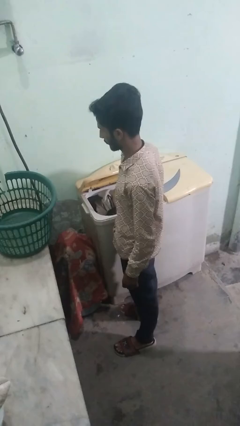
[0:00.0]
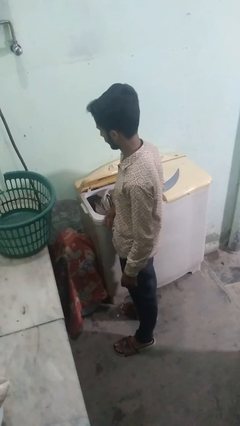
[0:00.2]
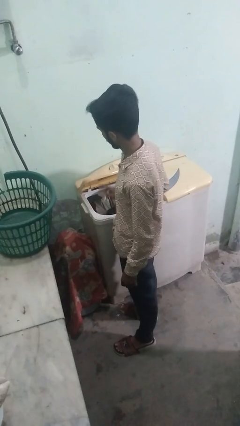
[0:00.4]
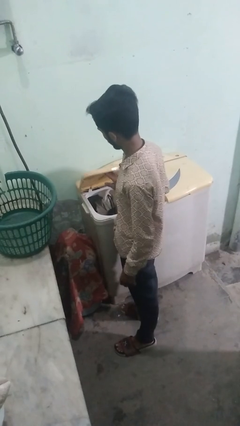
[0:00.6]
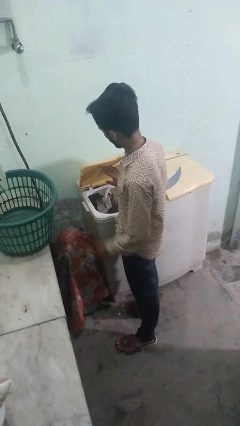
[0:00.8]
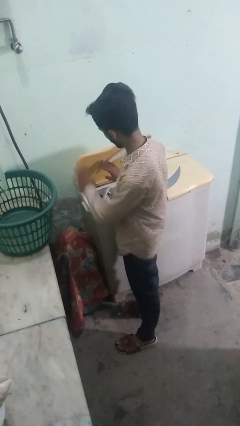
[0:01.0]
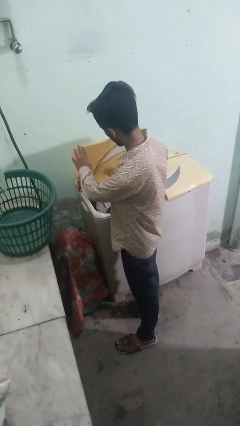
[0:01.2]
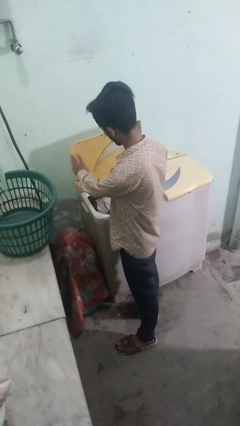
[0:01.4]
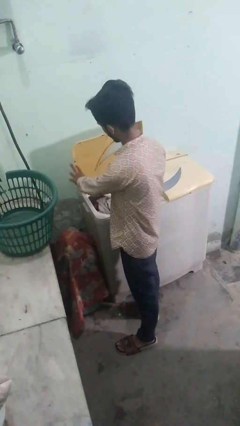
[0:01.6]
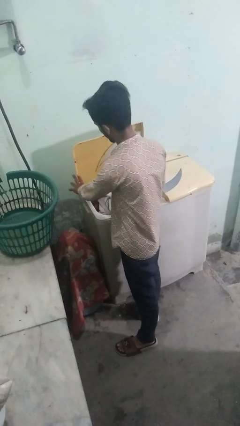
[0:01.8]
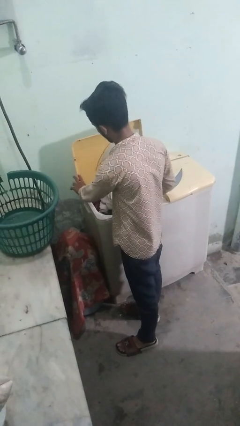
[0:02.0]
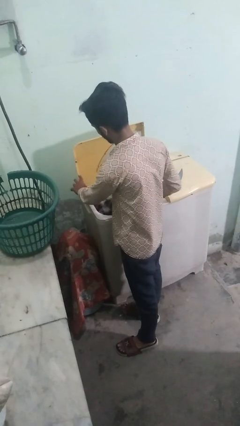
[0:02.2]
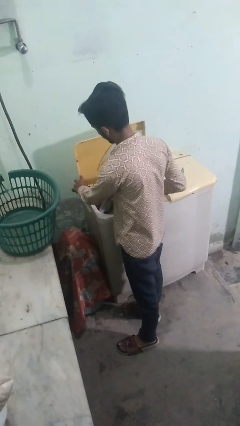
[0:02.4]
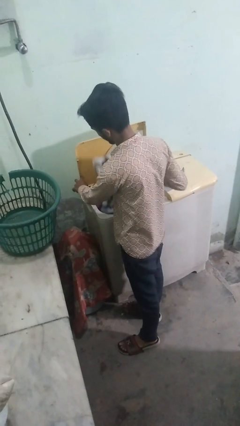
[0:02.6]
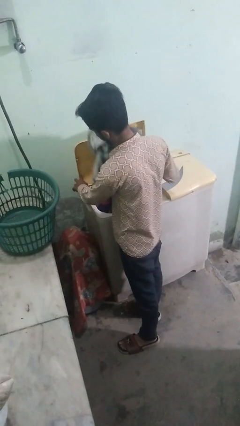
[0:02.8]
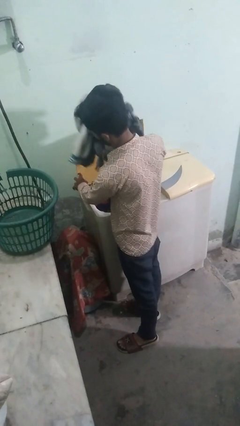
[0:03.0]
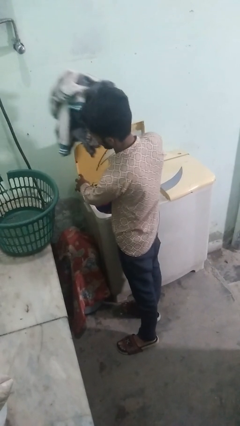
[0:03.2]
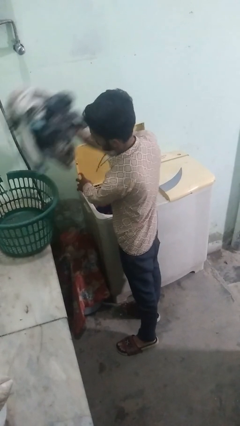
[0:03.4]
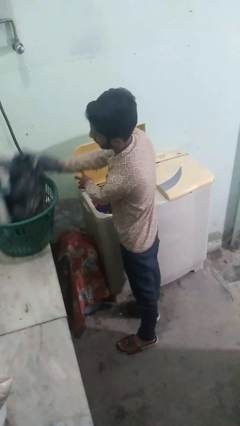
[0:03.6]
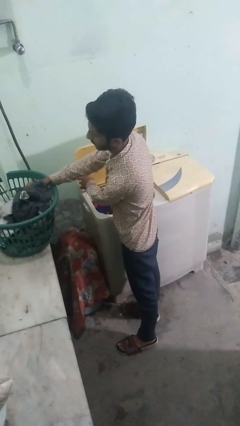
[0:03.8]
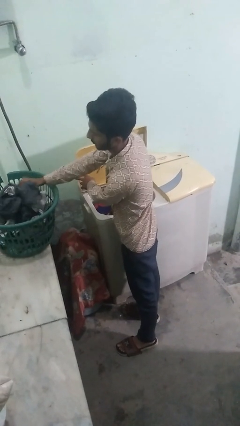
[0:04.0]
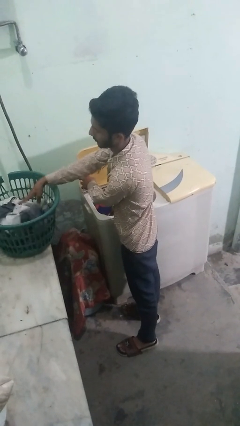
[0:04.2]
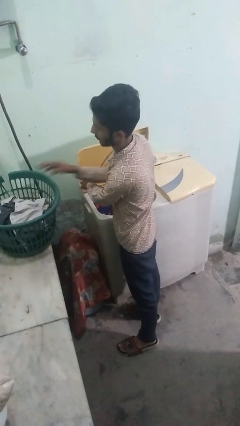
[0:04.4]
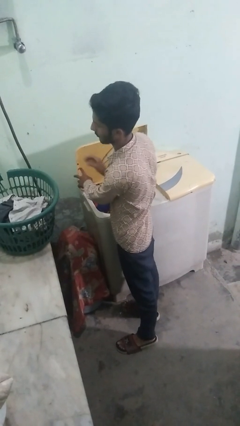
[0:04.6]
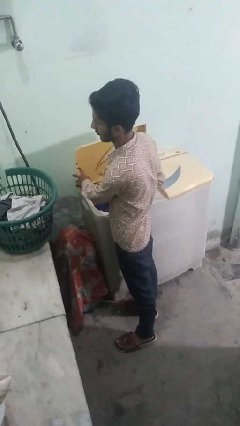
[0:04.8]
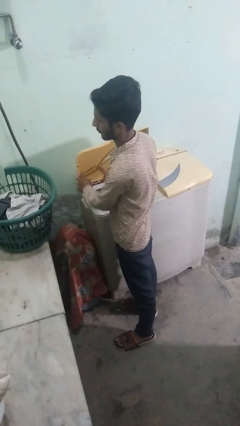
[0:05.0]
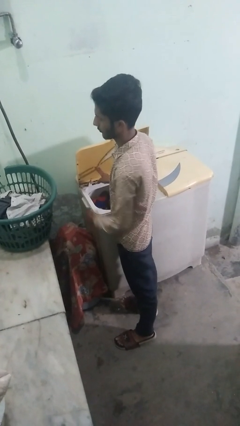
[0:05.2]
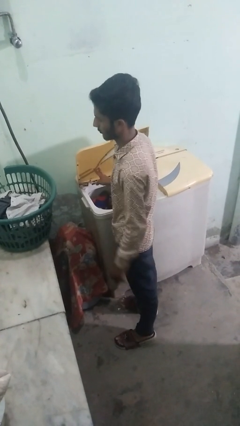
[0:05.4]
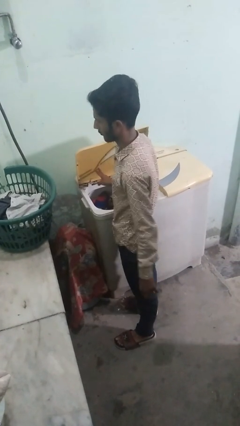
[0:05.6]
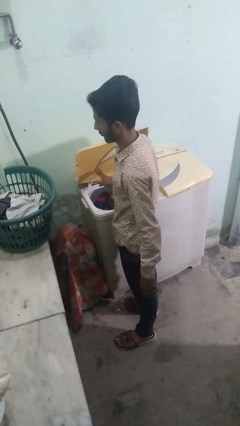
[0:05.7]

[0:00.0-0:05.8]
person unloads clotheswasher

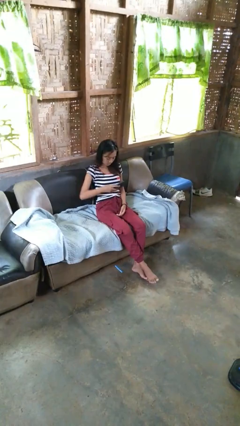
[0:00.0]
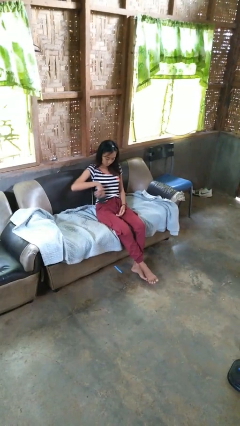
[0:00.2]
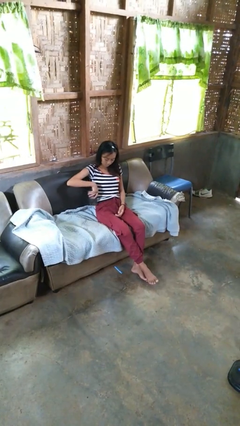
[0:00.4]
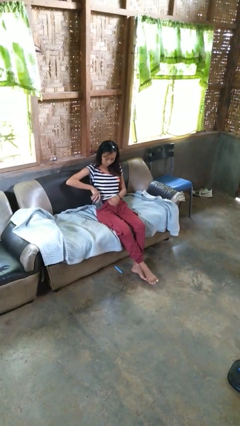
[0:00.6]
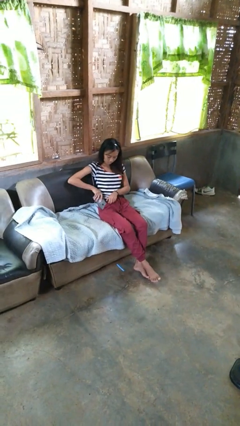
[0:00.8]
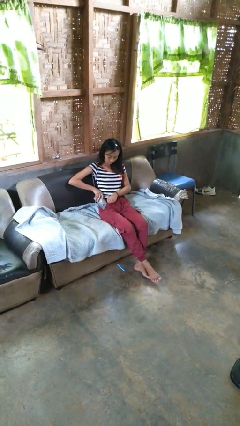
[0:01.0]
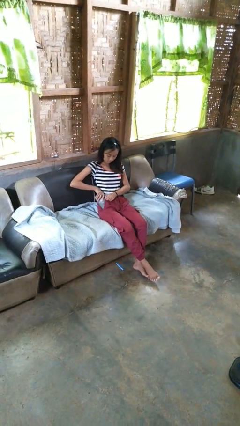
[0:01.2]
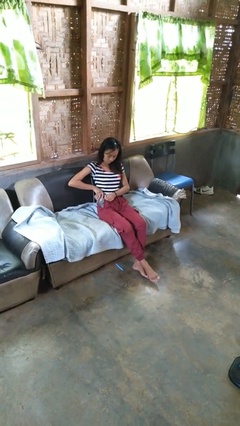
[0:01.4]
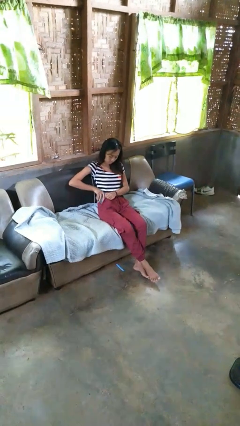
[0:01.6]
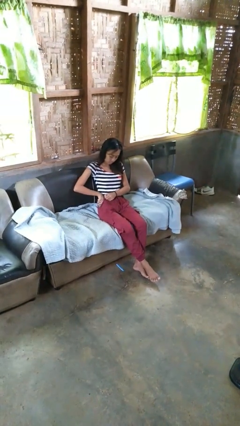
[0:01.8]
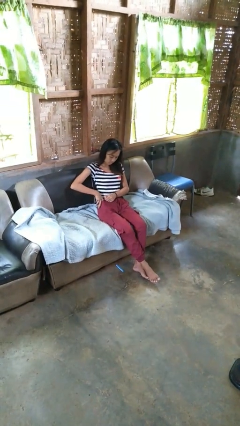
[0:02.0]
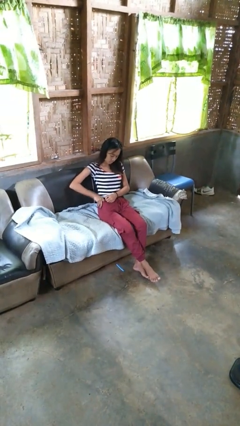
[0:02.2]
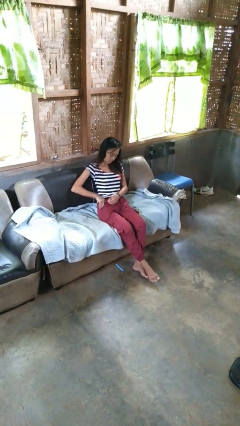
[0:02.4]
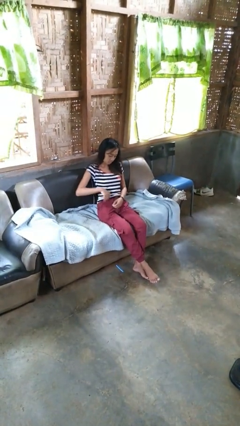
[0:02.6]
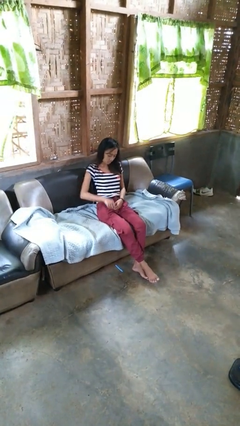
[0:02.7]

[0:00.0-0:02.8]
person puts phone into pocket

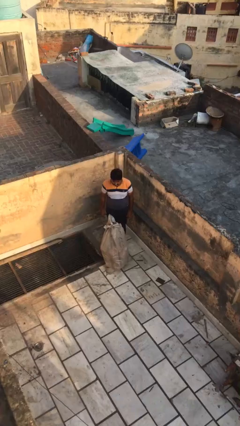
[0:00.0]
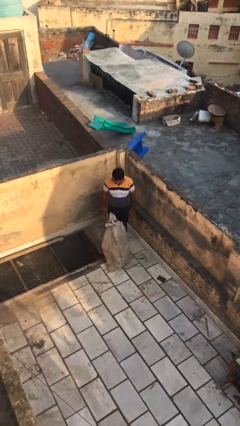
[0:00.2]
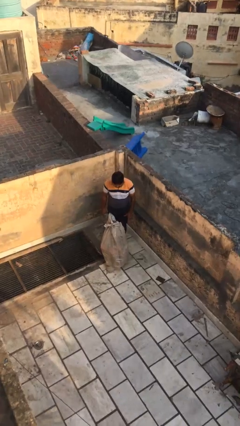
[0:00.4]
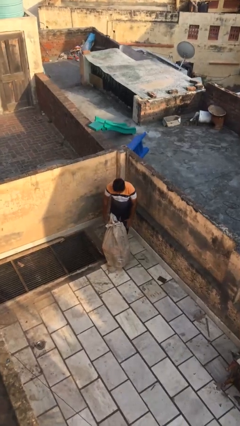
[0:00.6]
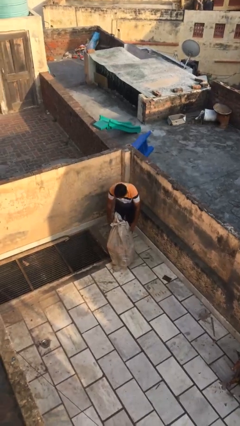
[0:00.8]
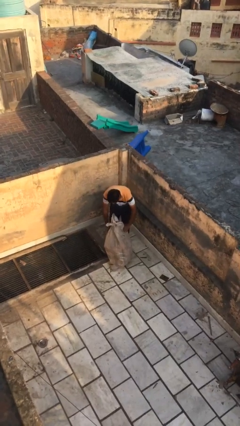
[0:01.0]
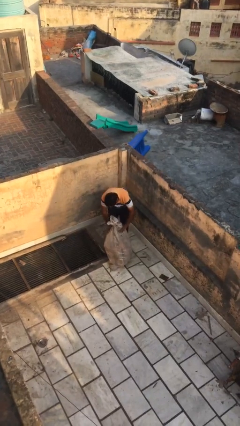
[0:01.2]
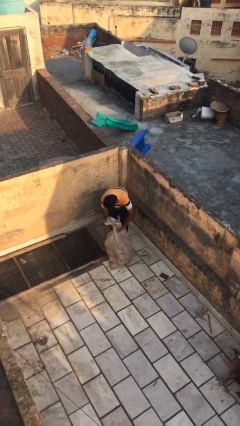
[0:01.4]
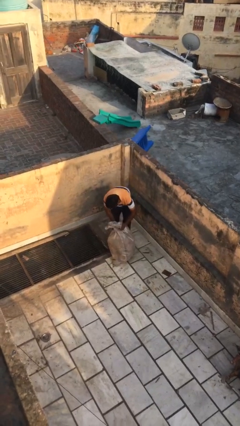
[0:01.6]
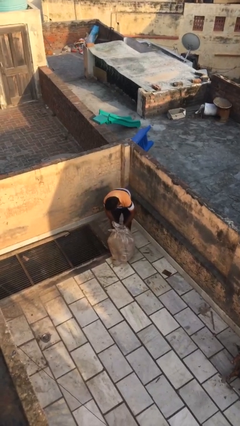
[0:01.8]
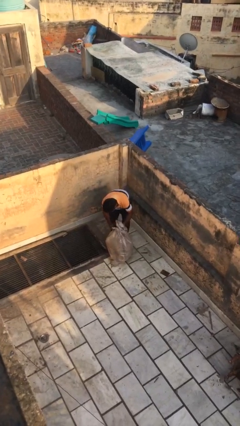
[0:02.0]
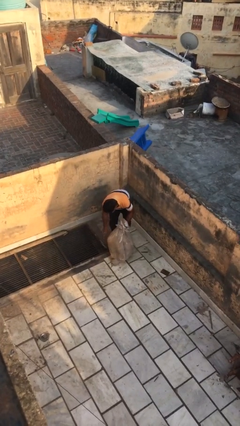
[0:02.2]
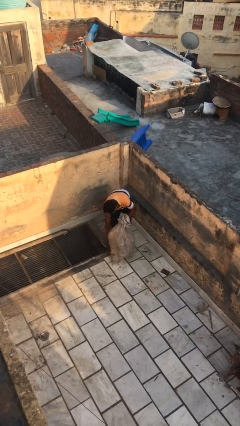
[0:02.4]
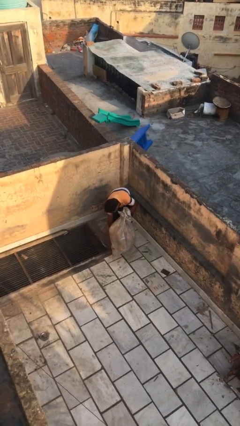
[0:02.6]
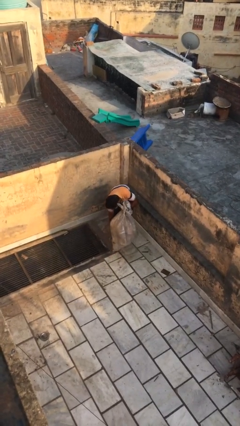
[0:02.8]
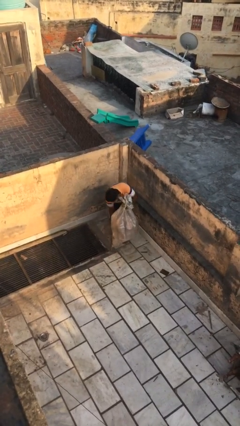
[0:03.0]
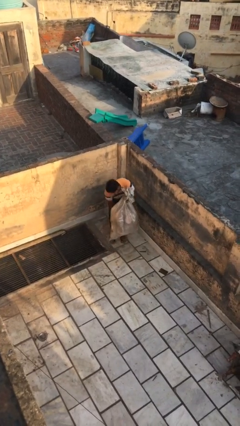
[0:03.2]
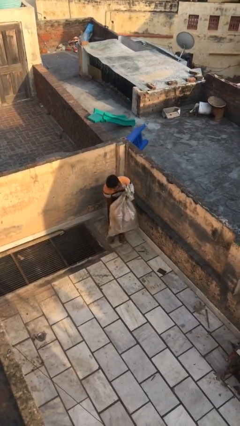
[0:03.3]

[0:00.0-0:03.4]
person picks up object from floor

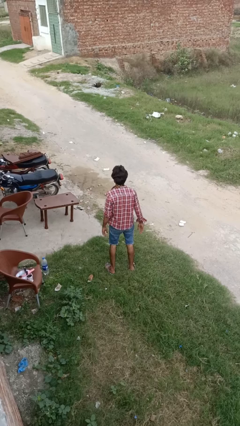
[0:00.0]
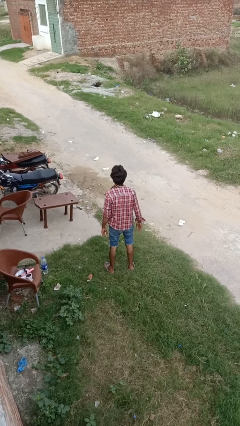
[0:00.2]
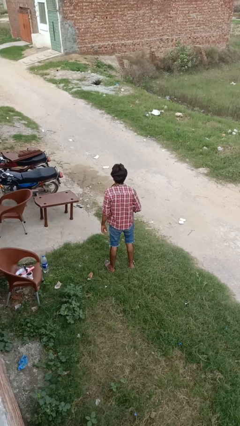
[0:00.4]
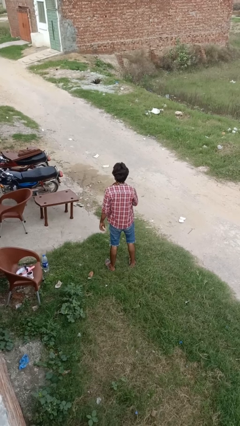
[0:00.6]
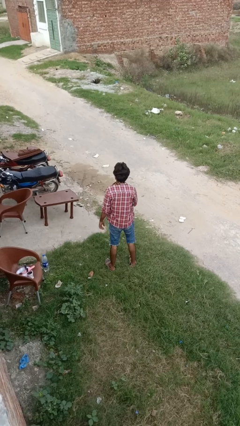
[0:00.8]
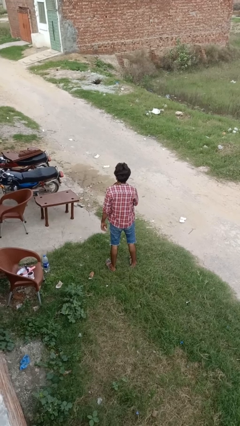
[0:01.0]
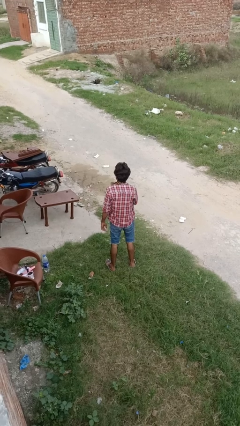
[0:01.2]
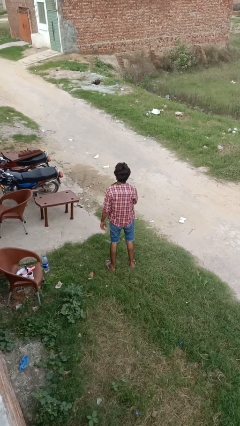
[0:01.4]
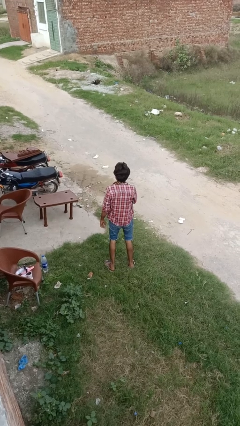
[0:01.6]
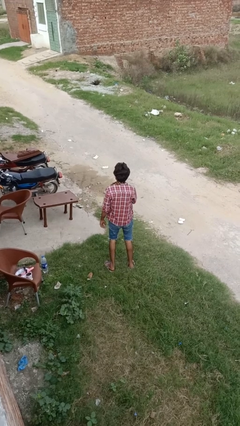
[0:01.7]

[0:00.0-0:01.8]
person drums on chest

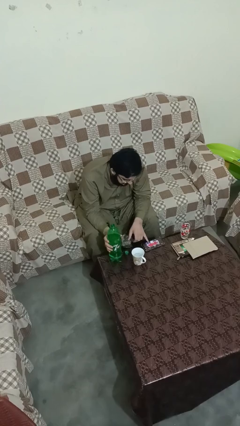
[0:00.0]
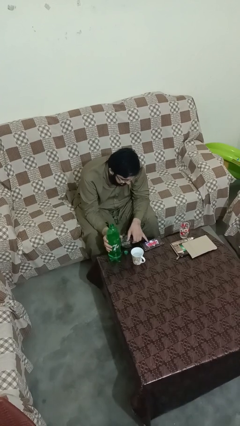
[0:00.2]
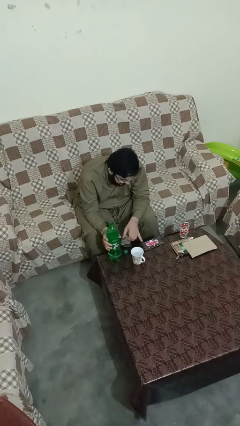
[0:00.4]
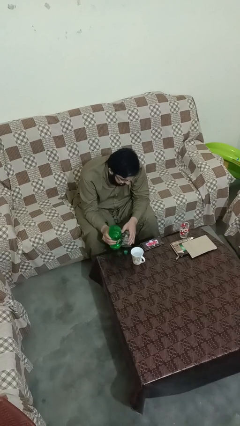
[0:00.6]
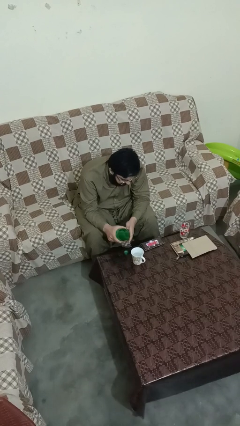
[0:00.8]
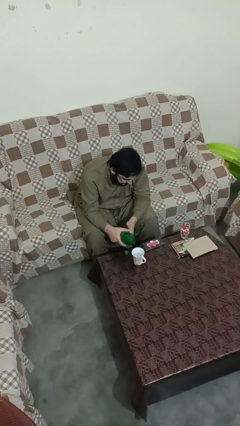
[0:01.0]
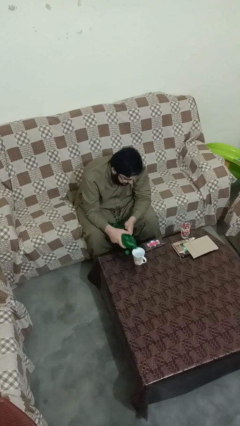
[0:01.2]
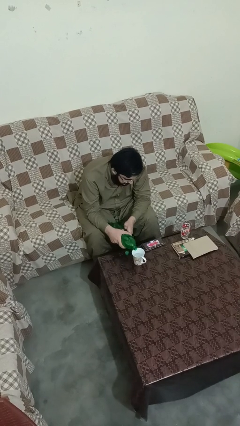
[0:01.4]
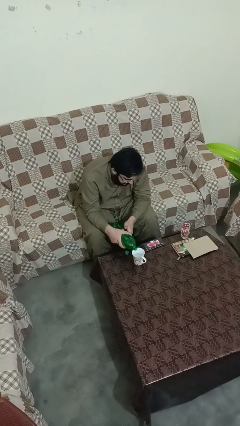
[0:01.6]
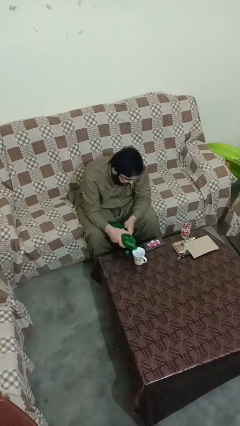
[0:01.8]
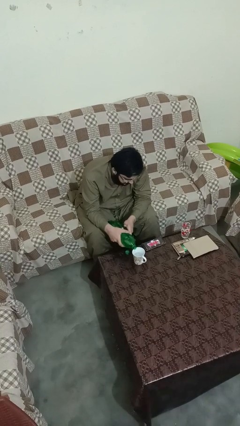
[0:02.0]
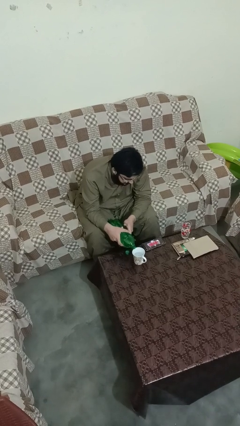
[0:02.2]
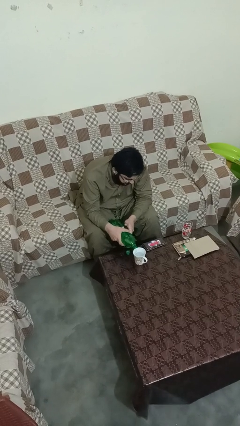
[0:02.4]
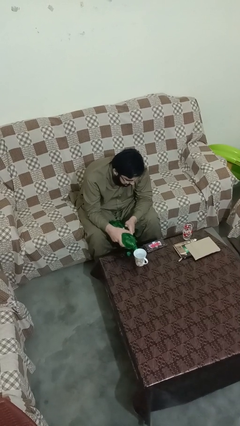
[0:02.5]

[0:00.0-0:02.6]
person pours liquid into cup

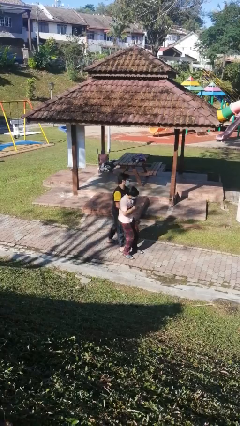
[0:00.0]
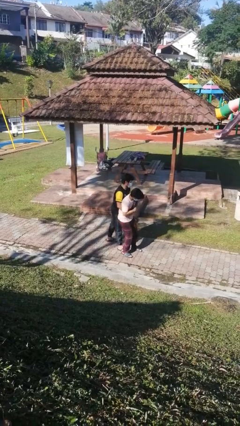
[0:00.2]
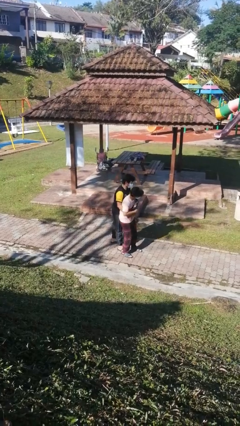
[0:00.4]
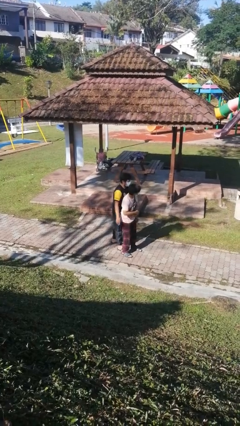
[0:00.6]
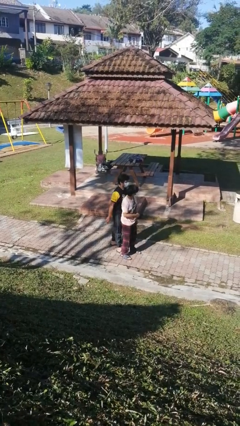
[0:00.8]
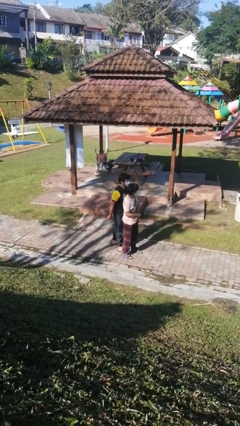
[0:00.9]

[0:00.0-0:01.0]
person puts down person

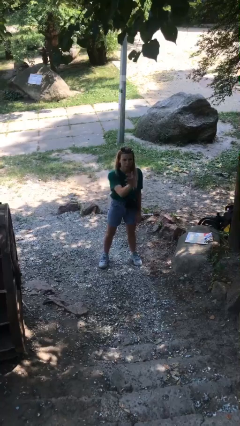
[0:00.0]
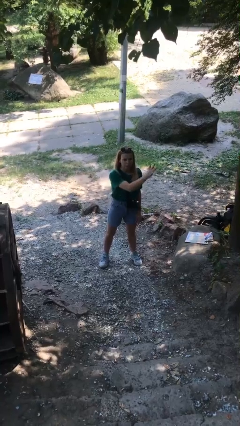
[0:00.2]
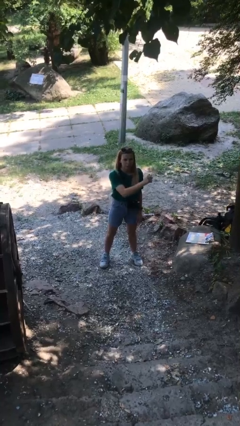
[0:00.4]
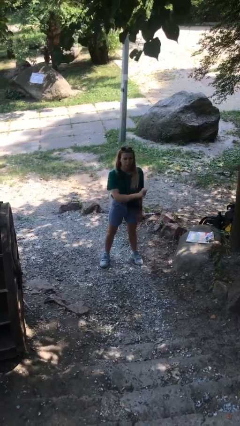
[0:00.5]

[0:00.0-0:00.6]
person gestures swipe left
